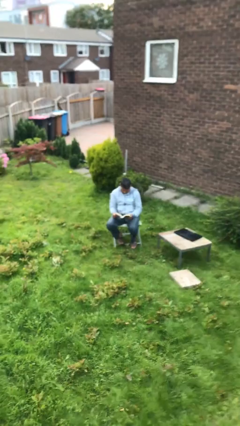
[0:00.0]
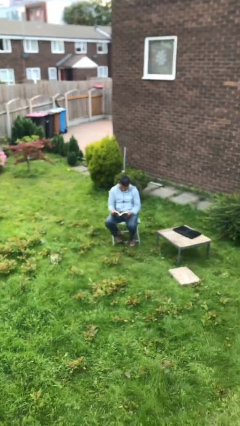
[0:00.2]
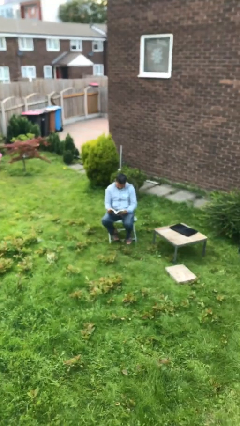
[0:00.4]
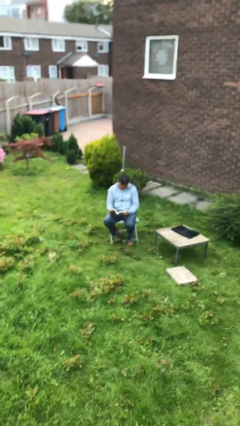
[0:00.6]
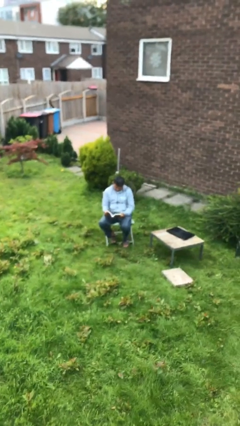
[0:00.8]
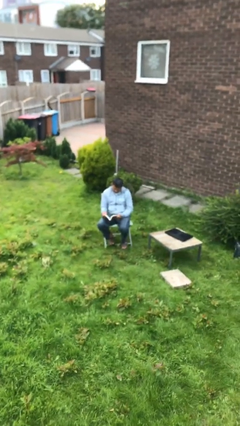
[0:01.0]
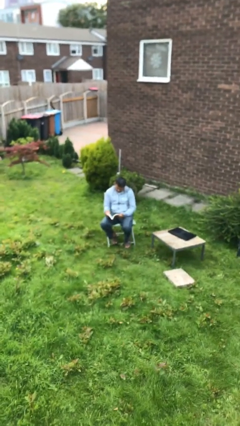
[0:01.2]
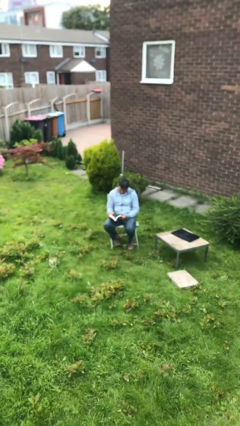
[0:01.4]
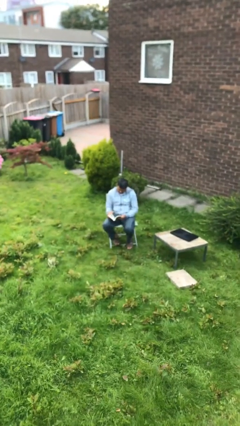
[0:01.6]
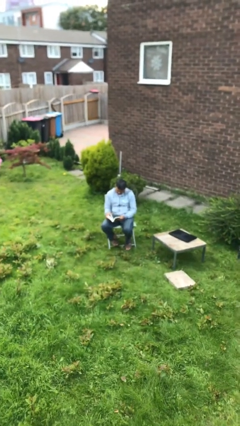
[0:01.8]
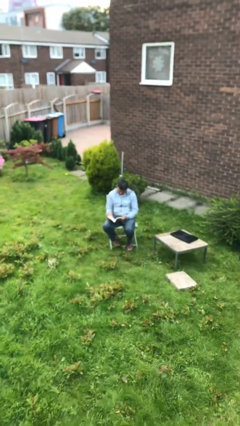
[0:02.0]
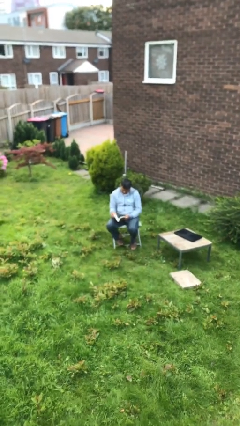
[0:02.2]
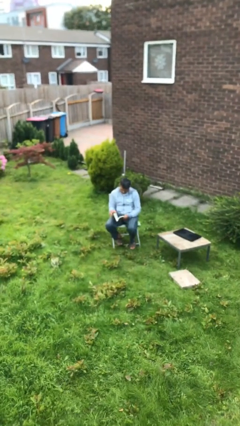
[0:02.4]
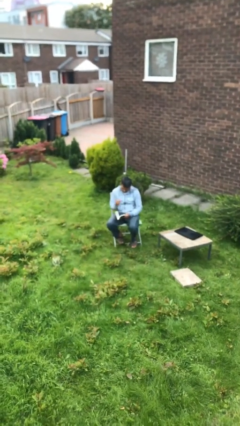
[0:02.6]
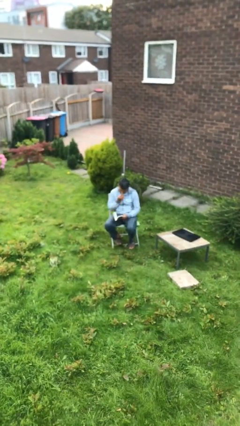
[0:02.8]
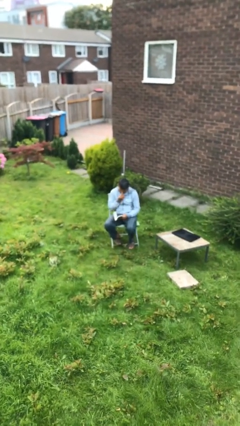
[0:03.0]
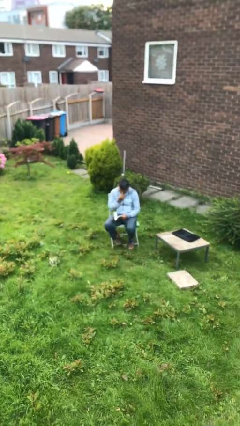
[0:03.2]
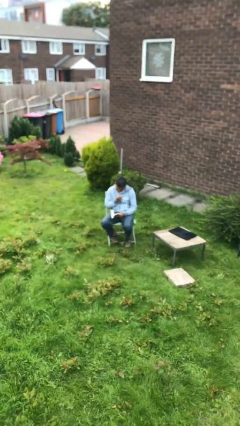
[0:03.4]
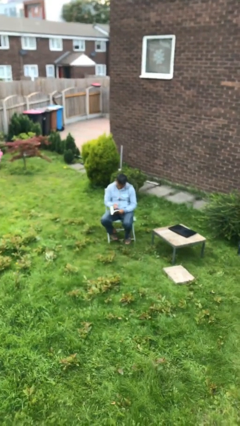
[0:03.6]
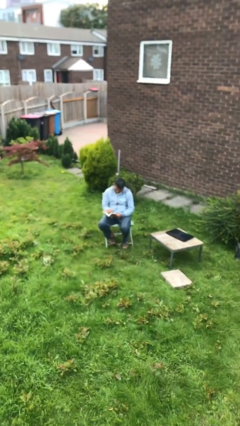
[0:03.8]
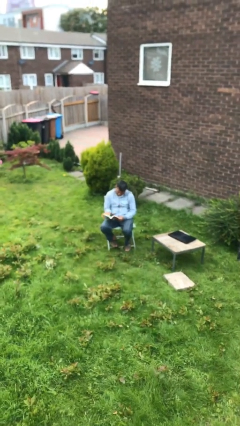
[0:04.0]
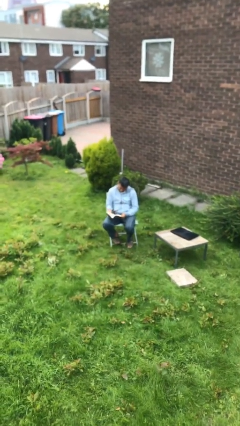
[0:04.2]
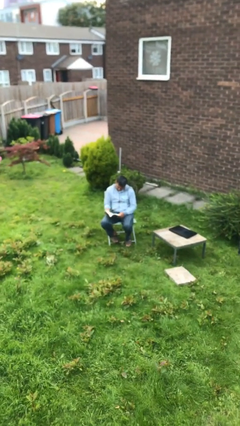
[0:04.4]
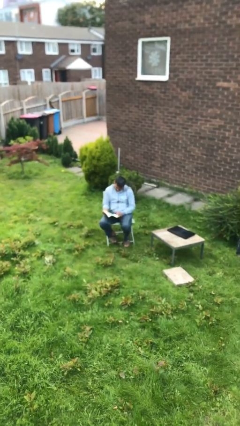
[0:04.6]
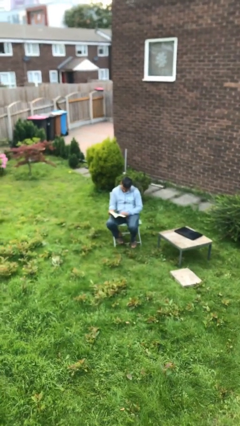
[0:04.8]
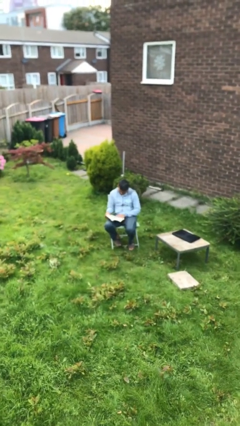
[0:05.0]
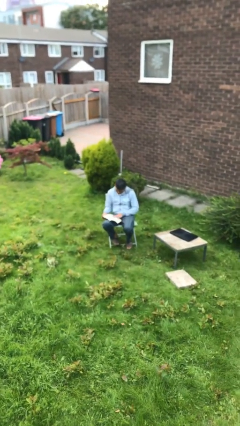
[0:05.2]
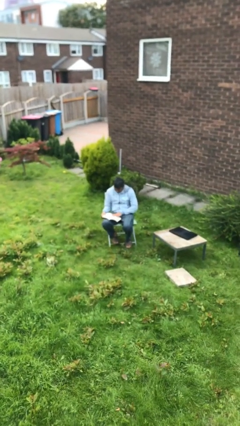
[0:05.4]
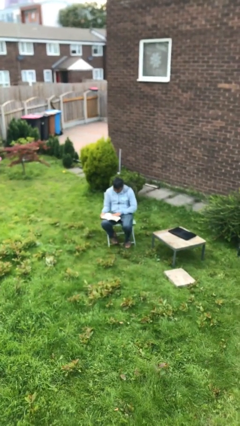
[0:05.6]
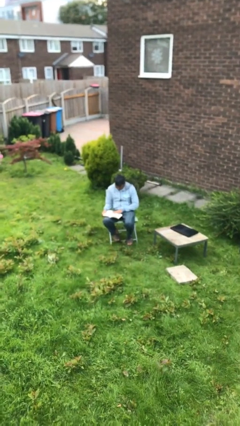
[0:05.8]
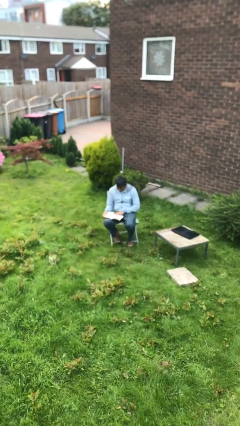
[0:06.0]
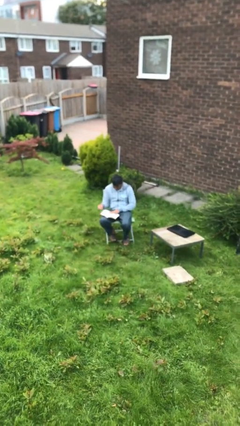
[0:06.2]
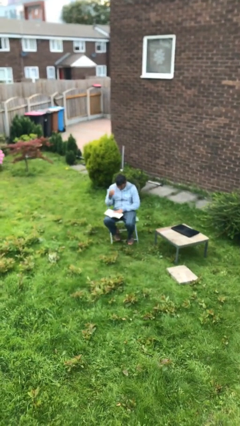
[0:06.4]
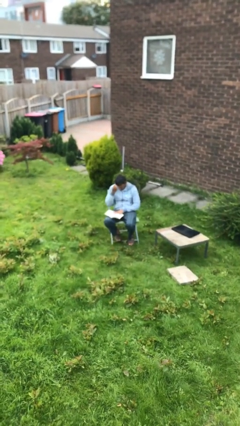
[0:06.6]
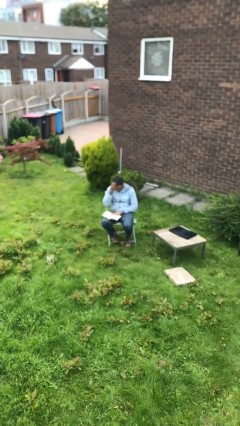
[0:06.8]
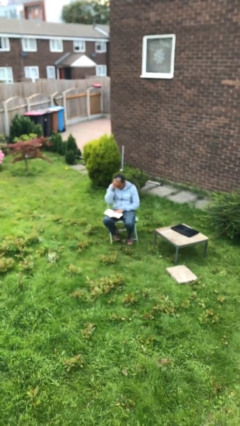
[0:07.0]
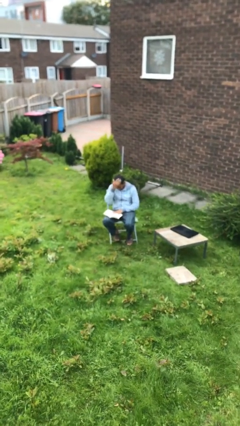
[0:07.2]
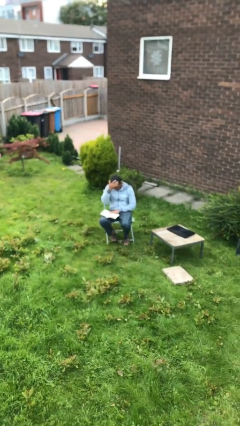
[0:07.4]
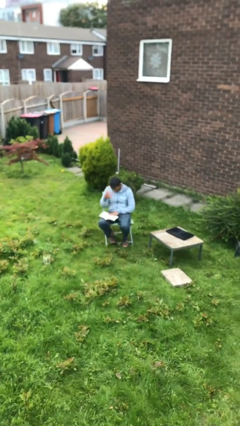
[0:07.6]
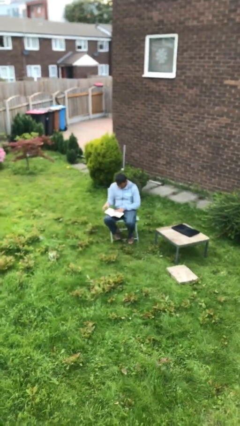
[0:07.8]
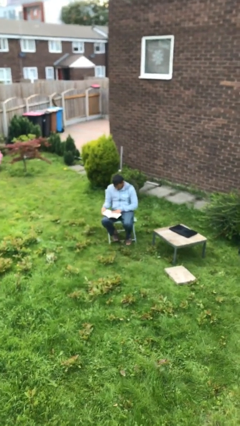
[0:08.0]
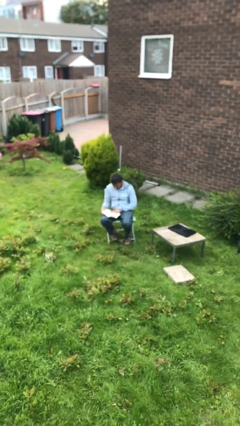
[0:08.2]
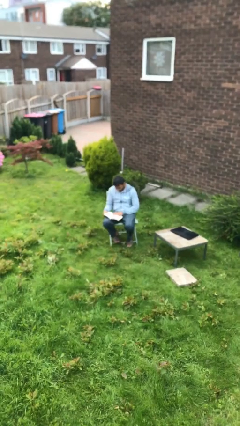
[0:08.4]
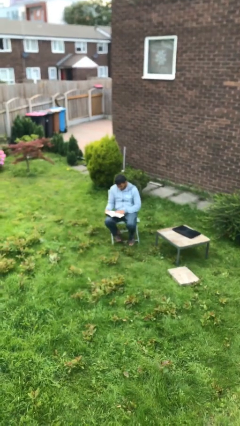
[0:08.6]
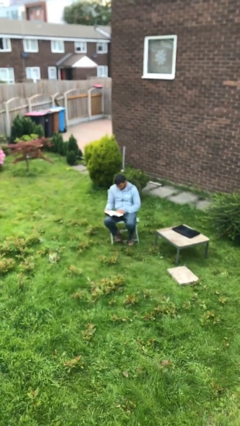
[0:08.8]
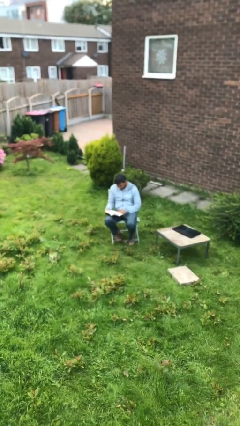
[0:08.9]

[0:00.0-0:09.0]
person reads document

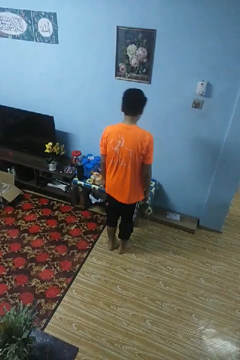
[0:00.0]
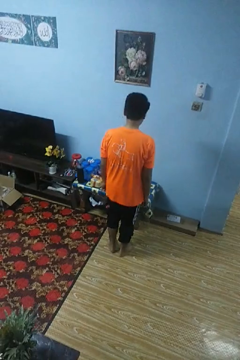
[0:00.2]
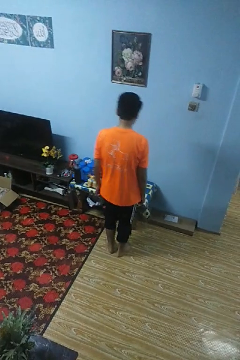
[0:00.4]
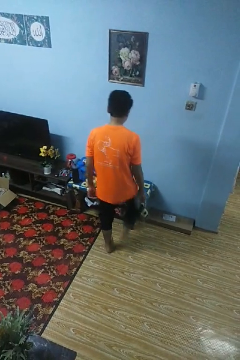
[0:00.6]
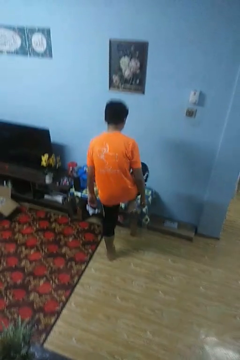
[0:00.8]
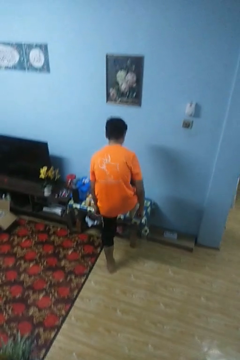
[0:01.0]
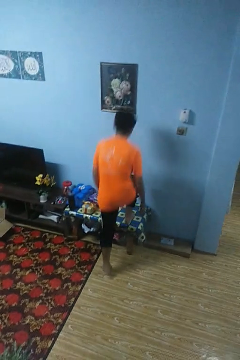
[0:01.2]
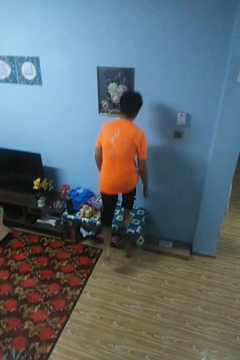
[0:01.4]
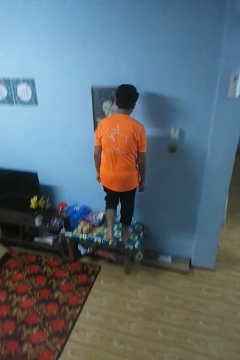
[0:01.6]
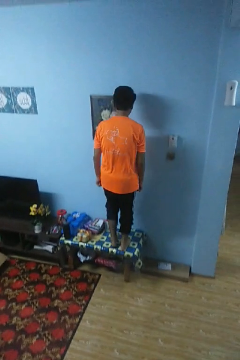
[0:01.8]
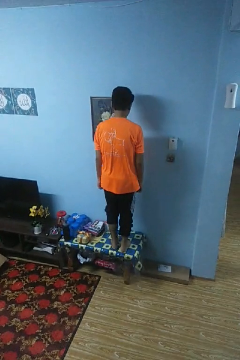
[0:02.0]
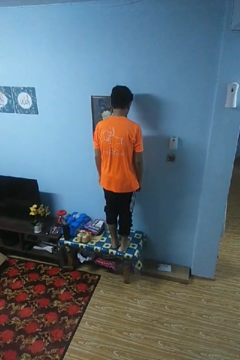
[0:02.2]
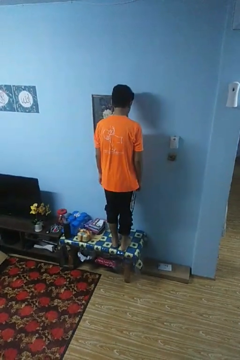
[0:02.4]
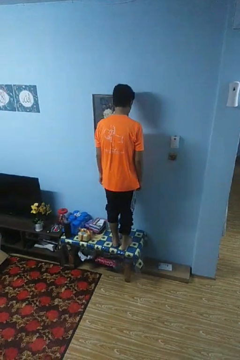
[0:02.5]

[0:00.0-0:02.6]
person climbs on table

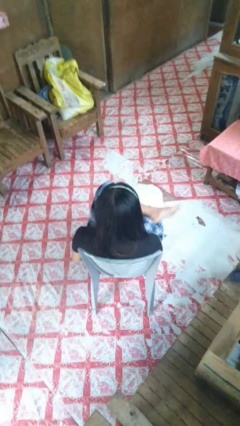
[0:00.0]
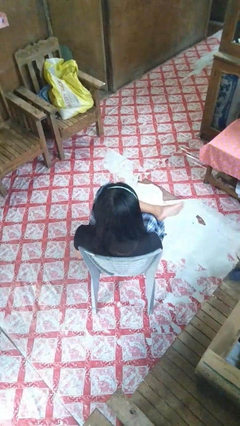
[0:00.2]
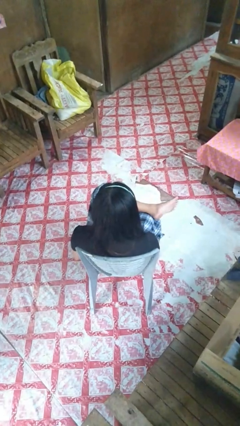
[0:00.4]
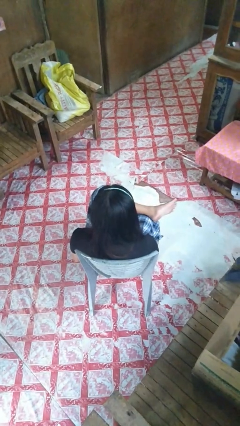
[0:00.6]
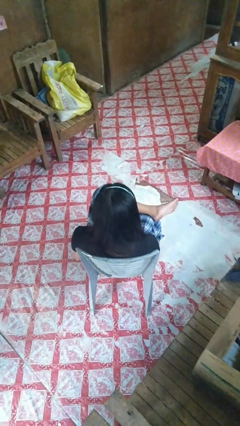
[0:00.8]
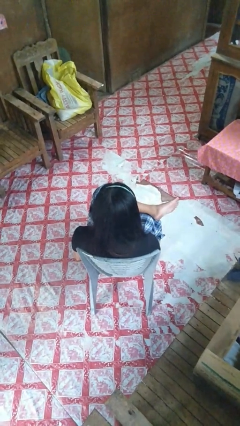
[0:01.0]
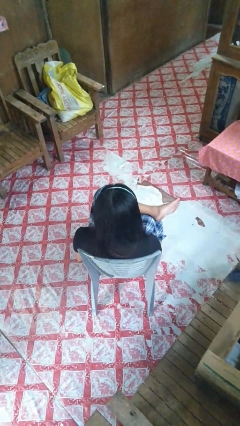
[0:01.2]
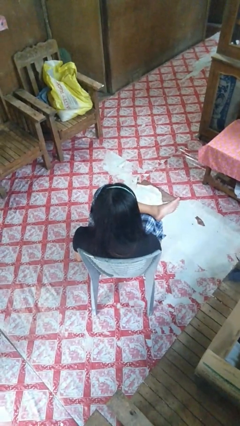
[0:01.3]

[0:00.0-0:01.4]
person crosses legs

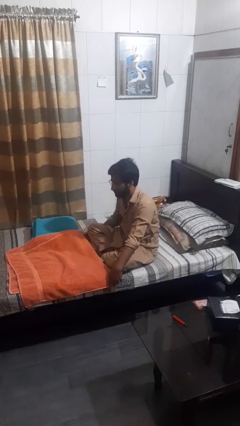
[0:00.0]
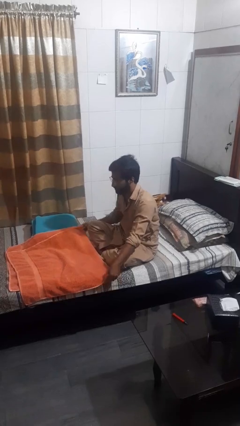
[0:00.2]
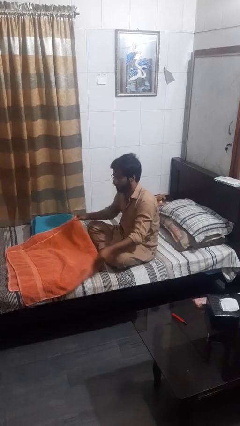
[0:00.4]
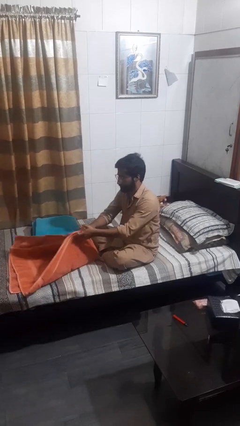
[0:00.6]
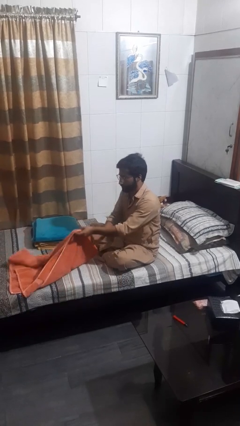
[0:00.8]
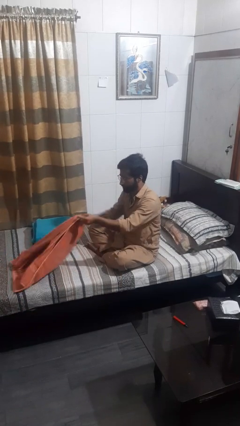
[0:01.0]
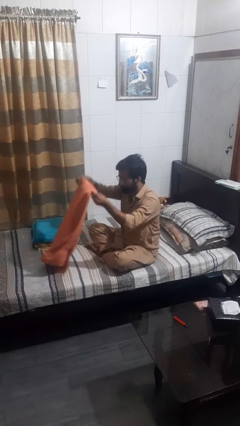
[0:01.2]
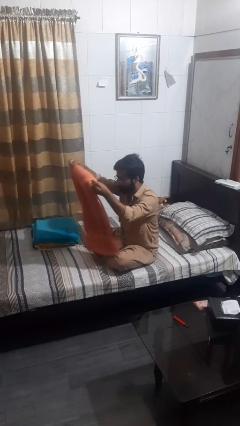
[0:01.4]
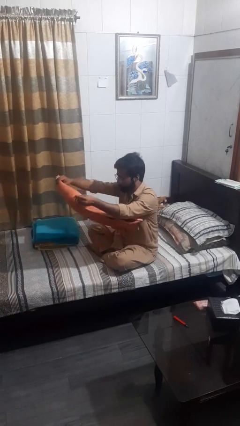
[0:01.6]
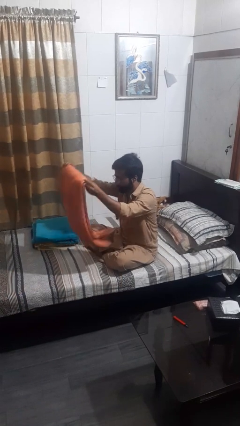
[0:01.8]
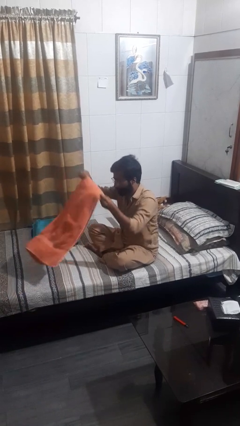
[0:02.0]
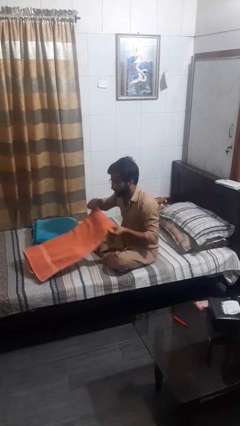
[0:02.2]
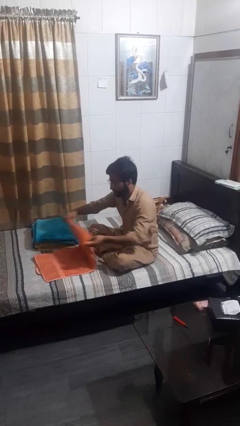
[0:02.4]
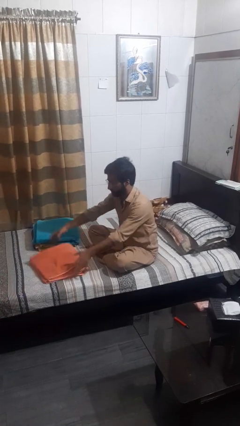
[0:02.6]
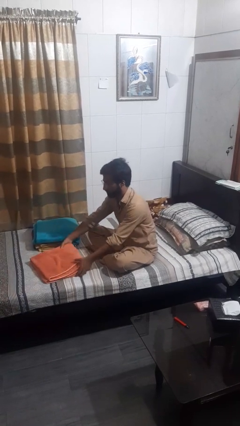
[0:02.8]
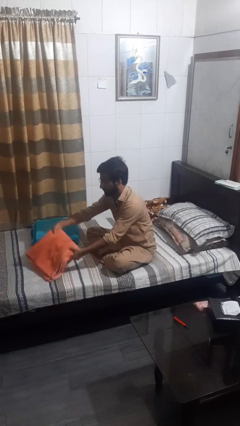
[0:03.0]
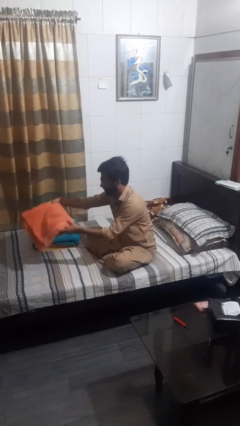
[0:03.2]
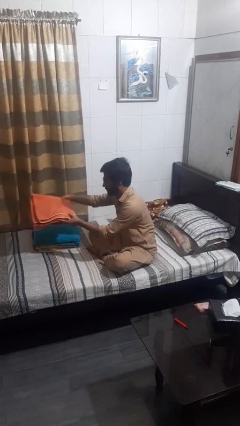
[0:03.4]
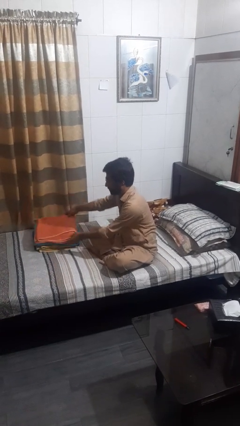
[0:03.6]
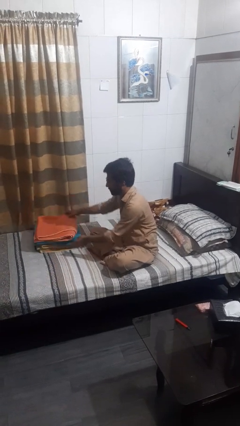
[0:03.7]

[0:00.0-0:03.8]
person folds towel

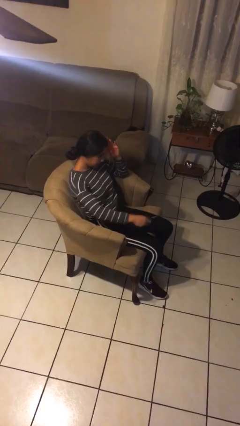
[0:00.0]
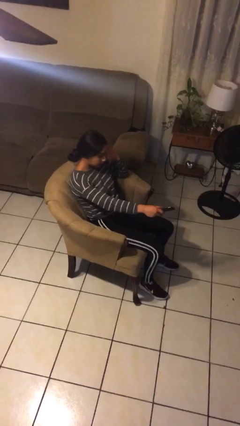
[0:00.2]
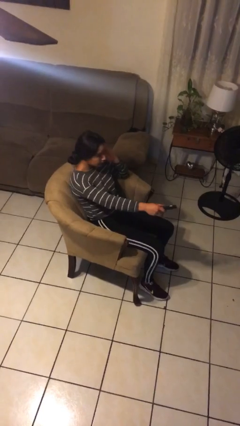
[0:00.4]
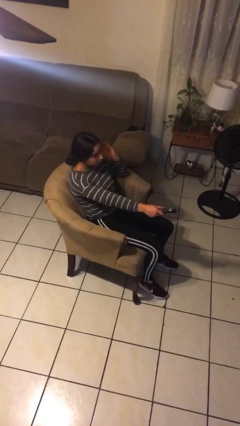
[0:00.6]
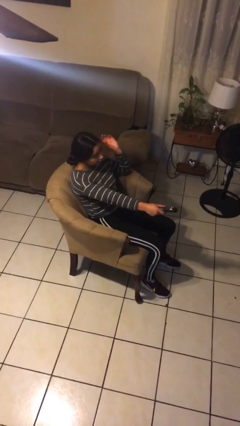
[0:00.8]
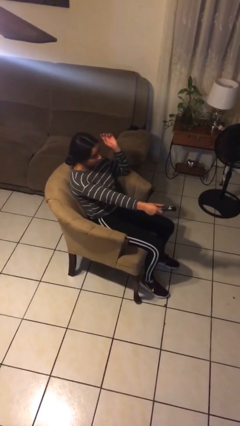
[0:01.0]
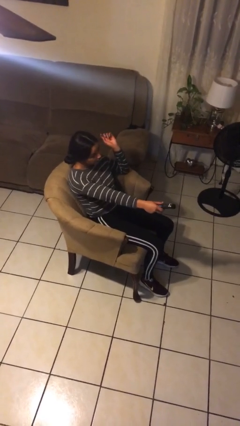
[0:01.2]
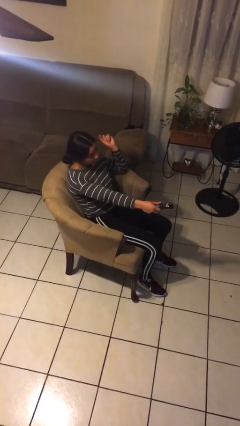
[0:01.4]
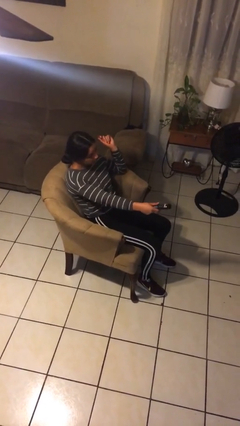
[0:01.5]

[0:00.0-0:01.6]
person uses television remote
